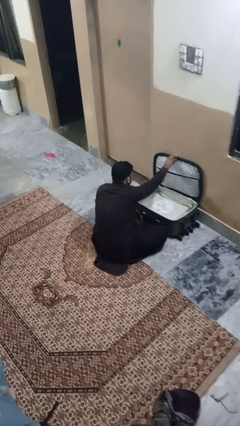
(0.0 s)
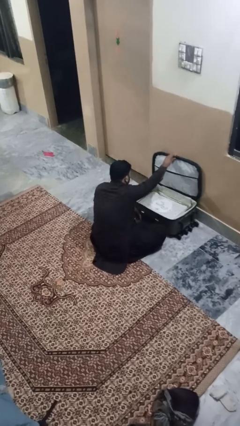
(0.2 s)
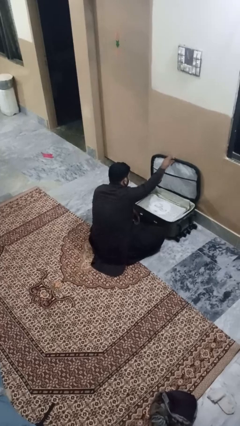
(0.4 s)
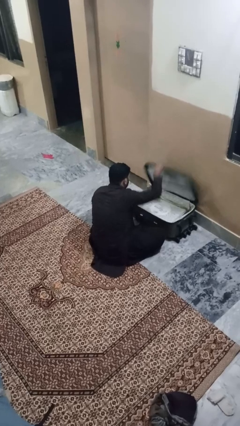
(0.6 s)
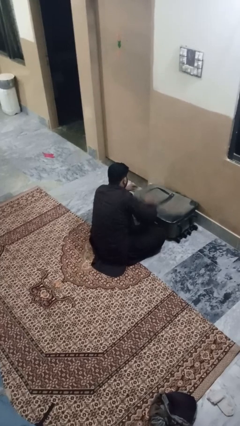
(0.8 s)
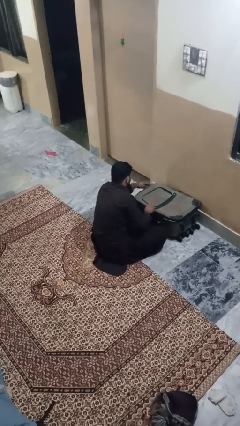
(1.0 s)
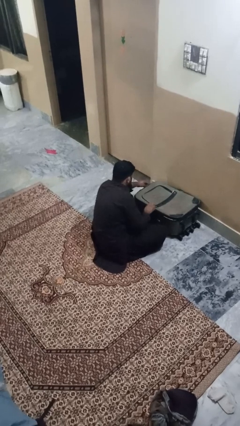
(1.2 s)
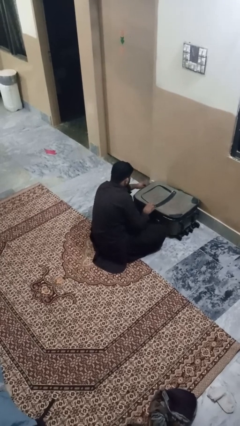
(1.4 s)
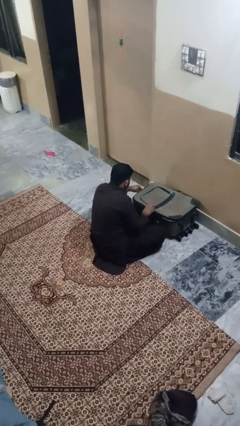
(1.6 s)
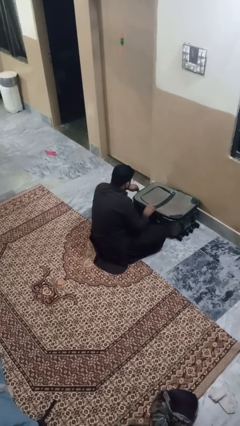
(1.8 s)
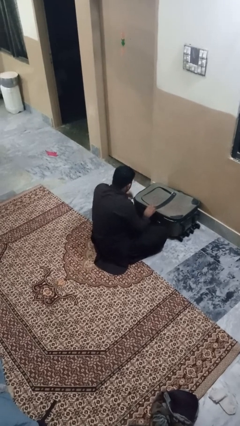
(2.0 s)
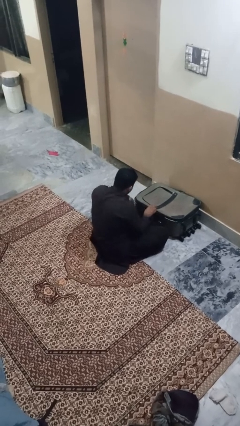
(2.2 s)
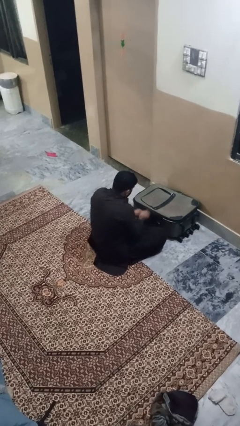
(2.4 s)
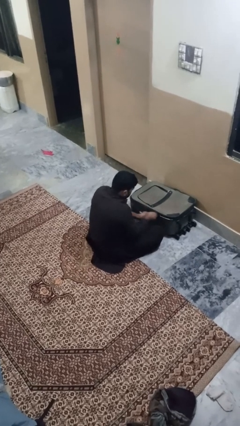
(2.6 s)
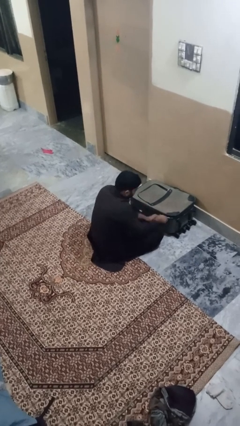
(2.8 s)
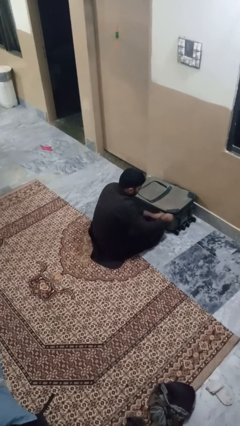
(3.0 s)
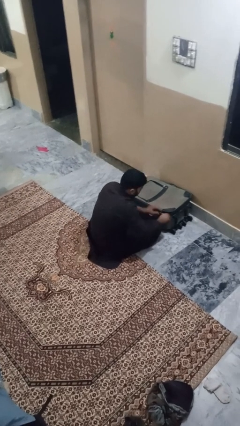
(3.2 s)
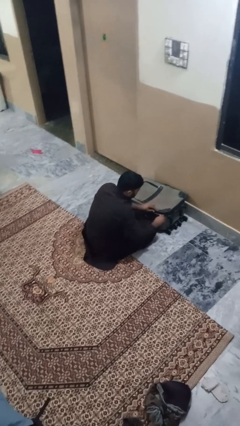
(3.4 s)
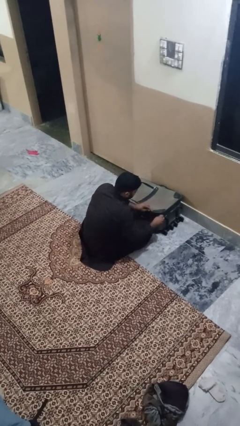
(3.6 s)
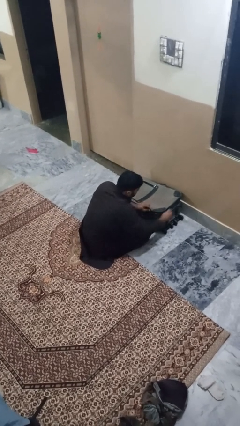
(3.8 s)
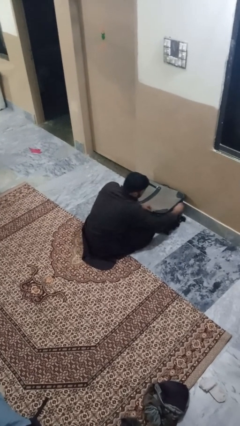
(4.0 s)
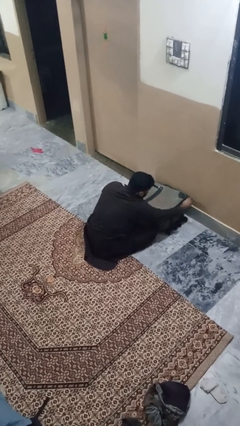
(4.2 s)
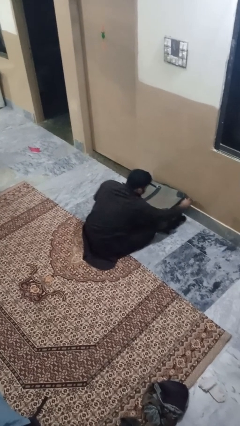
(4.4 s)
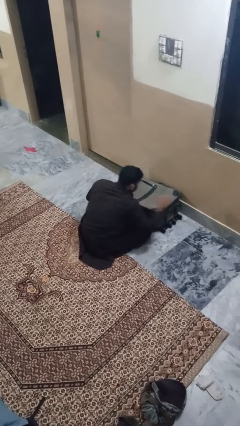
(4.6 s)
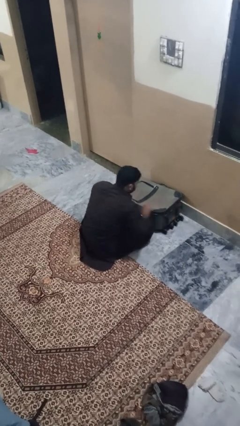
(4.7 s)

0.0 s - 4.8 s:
person closes suitcase

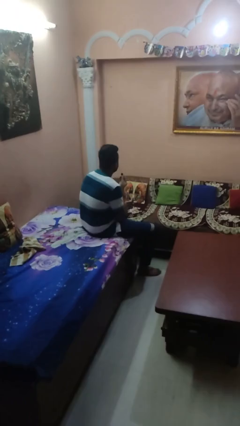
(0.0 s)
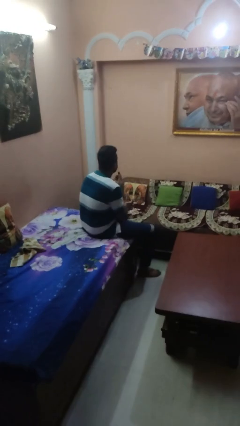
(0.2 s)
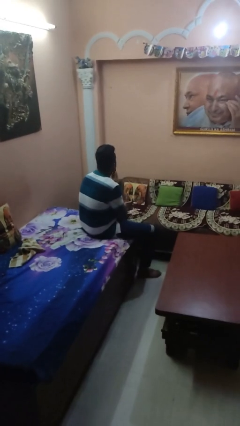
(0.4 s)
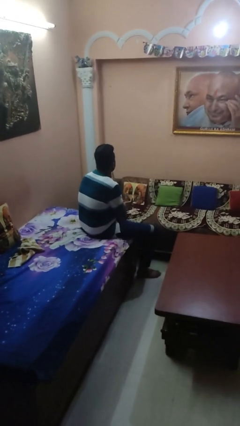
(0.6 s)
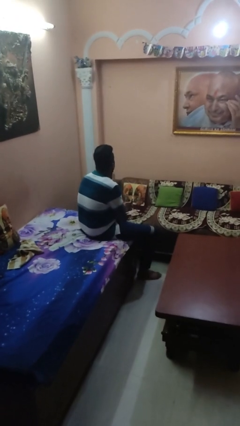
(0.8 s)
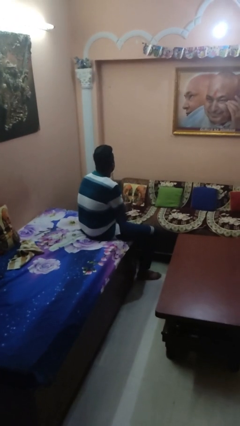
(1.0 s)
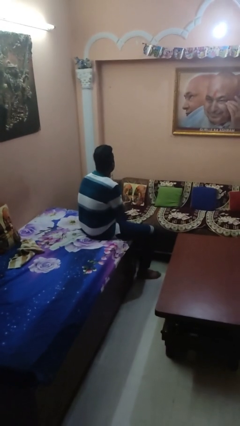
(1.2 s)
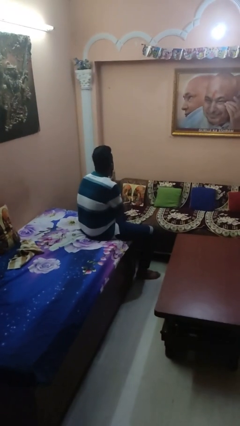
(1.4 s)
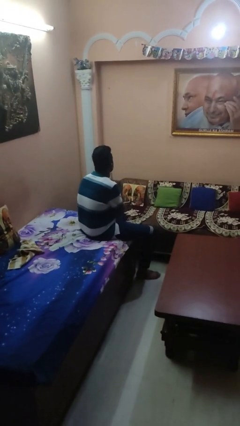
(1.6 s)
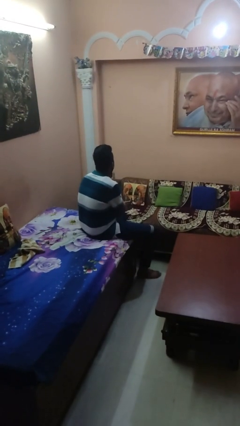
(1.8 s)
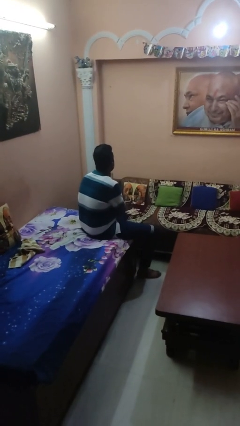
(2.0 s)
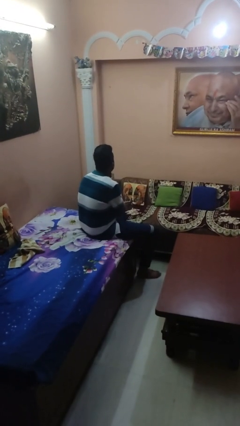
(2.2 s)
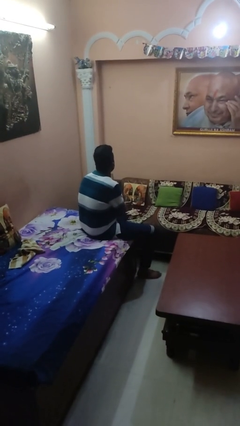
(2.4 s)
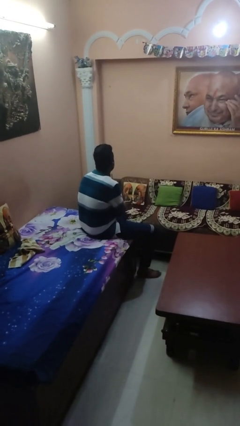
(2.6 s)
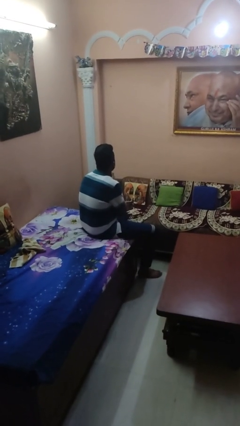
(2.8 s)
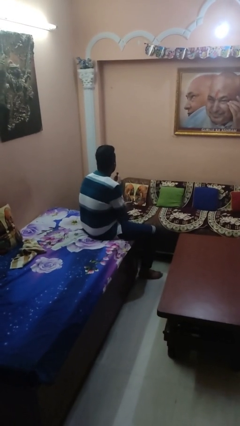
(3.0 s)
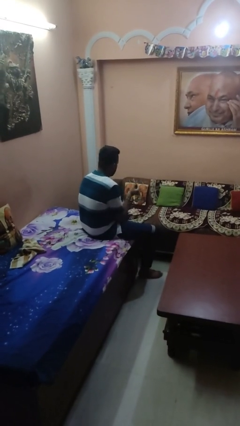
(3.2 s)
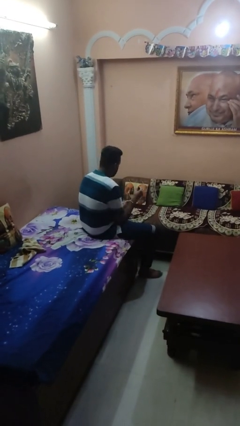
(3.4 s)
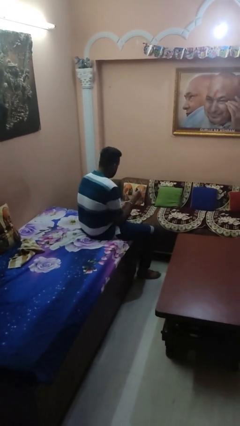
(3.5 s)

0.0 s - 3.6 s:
person applies lip makeup

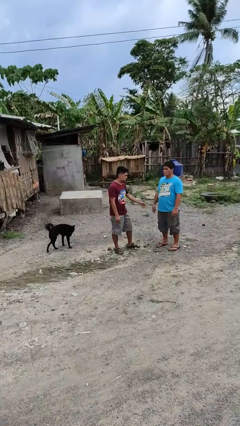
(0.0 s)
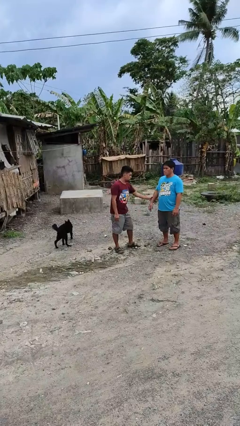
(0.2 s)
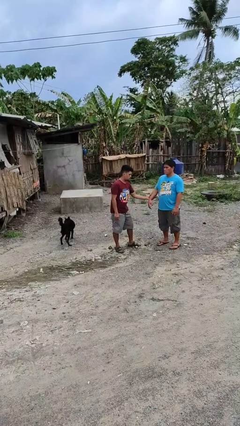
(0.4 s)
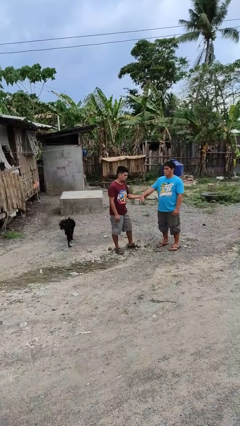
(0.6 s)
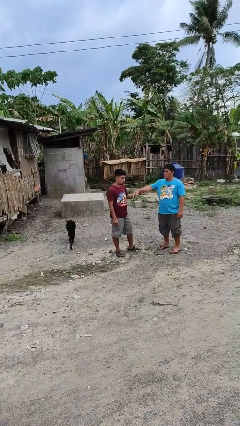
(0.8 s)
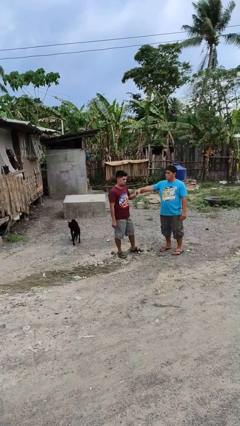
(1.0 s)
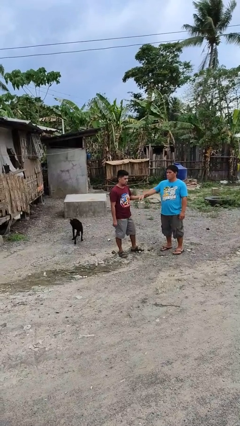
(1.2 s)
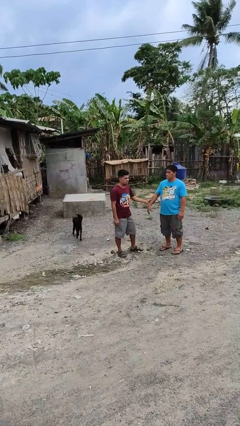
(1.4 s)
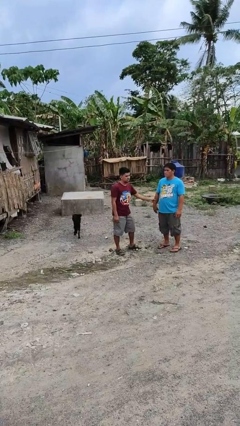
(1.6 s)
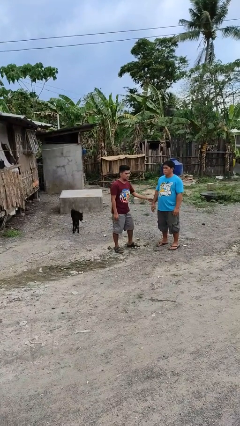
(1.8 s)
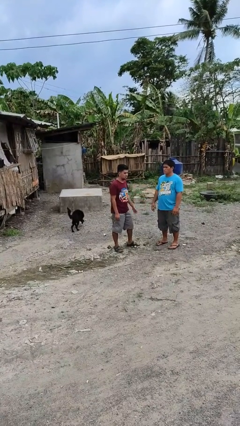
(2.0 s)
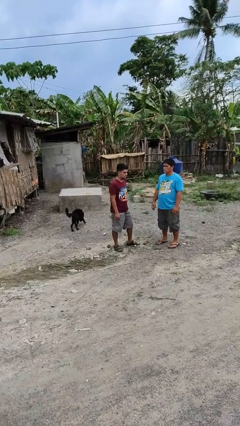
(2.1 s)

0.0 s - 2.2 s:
person grabs person by forearm

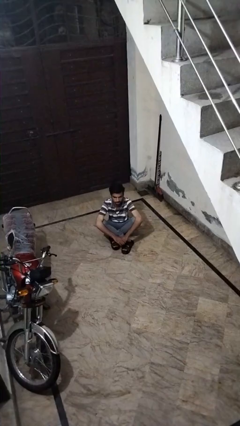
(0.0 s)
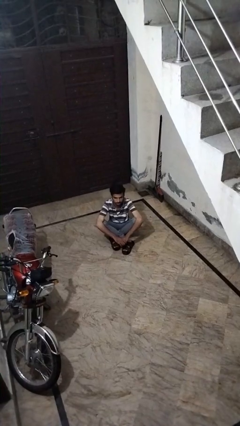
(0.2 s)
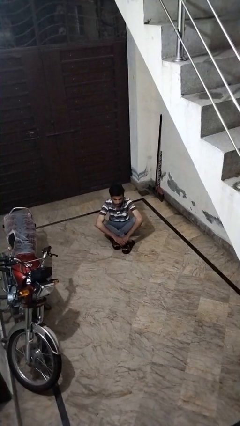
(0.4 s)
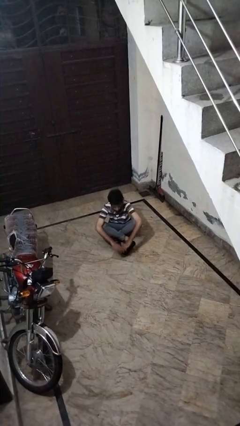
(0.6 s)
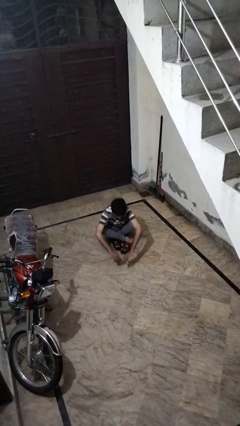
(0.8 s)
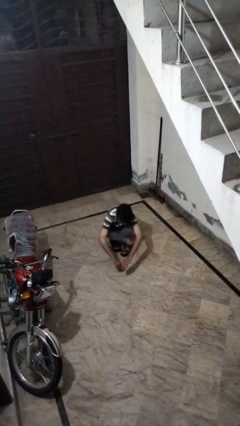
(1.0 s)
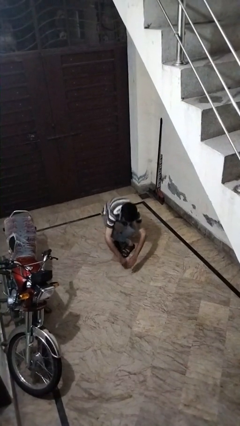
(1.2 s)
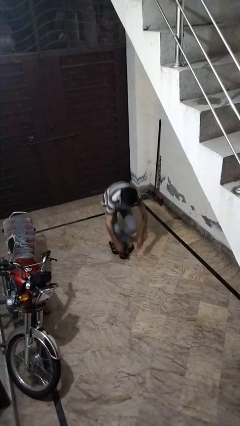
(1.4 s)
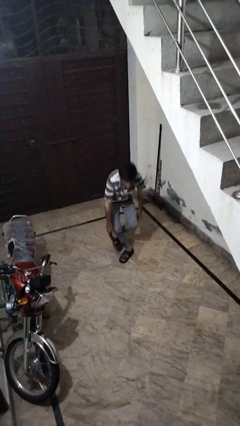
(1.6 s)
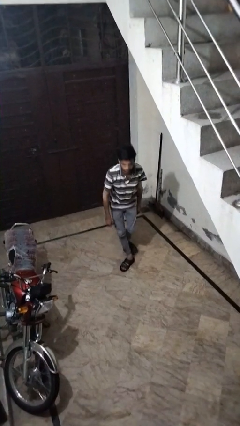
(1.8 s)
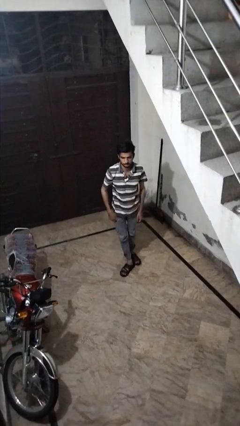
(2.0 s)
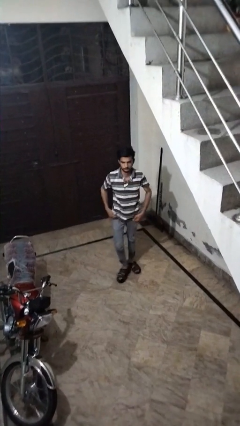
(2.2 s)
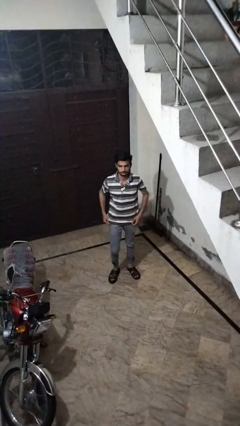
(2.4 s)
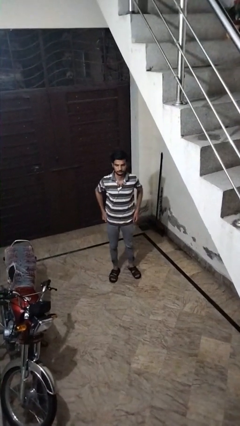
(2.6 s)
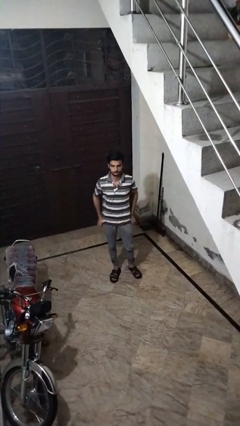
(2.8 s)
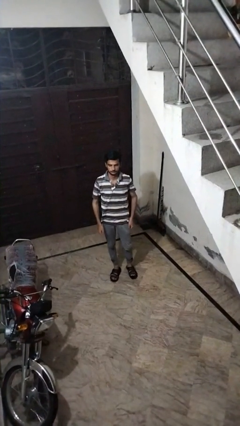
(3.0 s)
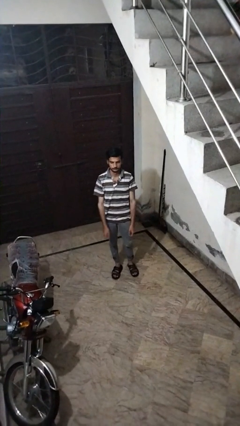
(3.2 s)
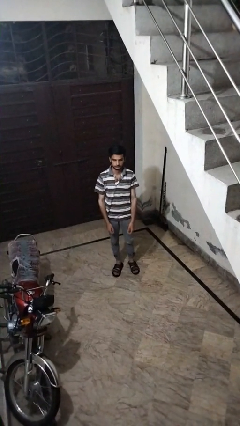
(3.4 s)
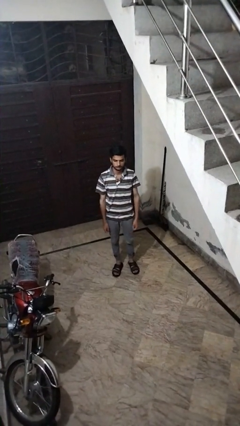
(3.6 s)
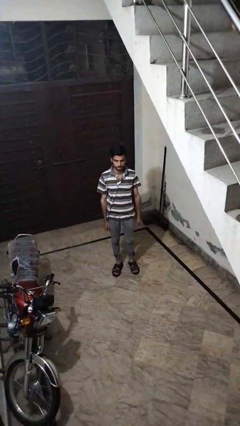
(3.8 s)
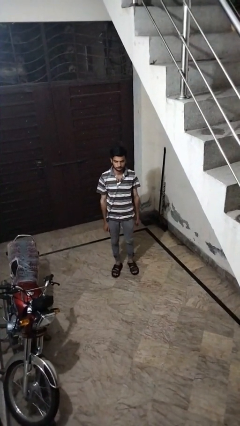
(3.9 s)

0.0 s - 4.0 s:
person stands up from floor

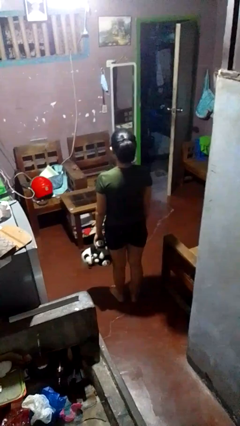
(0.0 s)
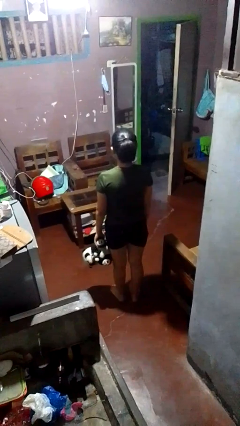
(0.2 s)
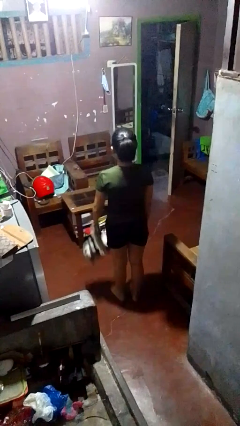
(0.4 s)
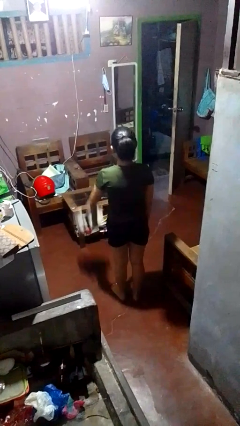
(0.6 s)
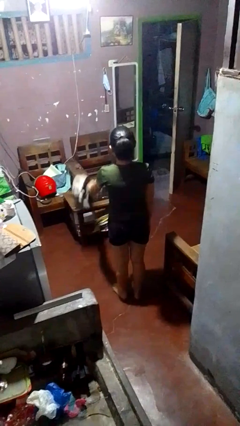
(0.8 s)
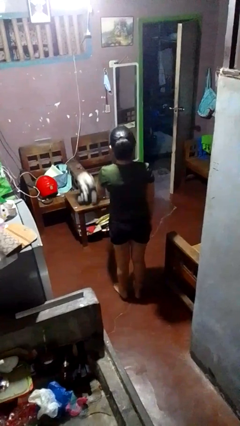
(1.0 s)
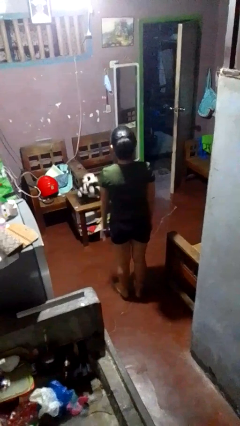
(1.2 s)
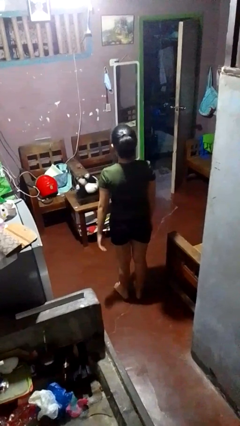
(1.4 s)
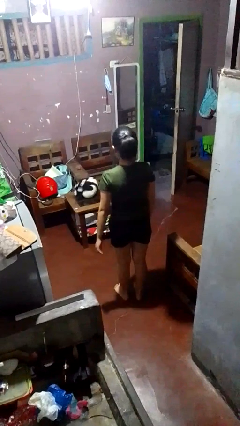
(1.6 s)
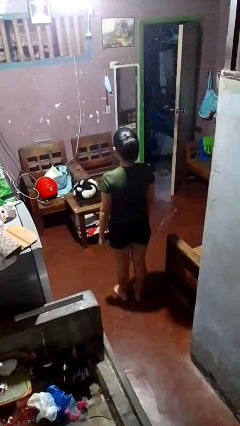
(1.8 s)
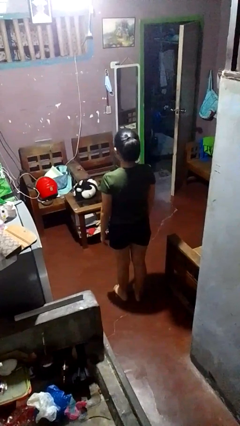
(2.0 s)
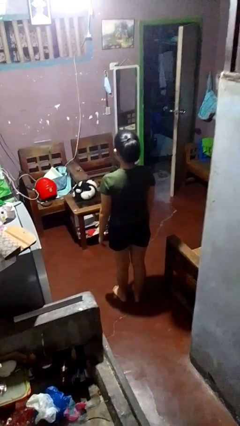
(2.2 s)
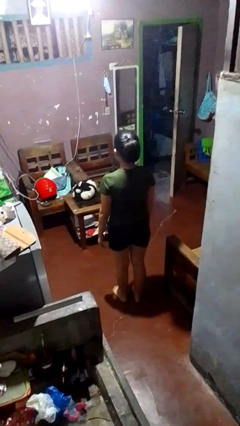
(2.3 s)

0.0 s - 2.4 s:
person throws object on table

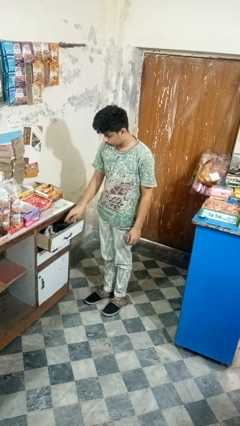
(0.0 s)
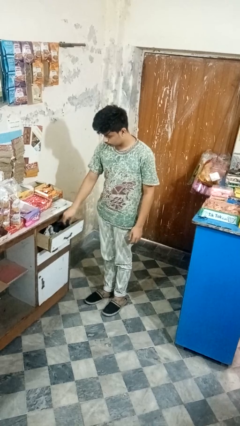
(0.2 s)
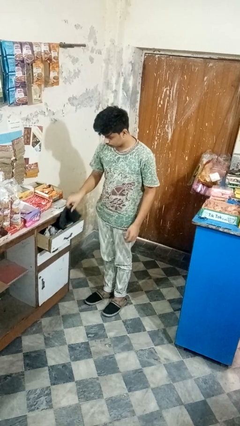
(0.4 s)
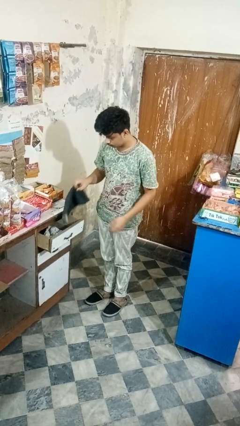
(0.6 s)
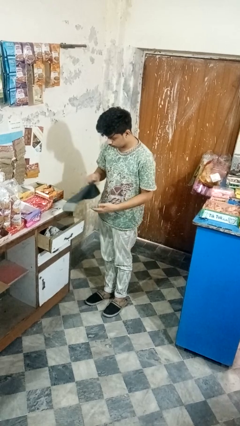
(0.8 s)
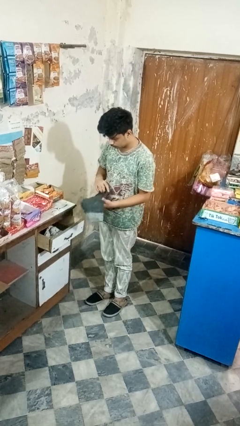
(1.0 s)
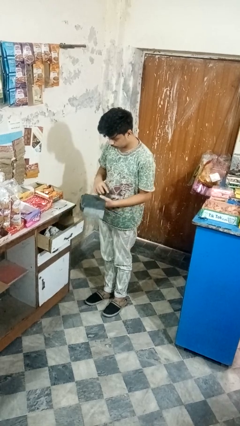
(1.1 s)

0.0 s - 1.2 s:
person takes clothes from dresser
